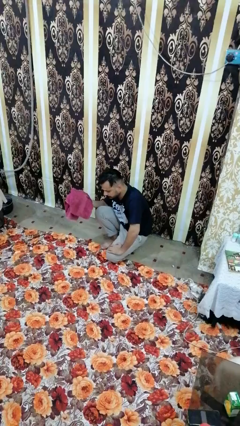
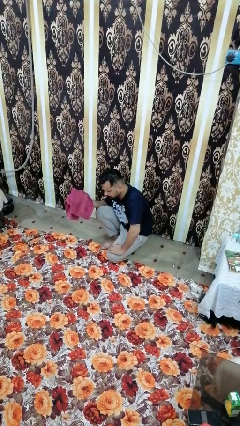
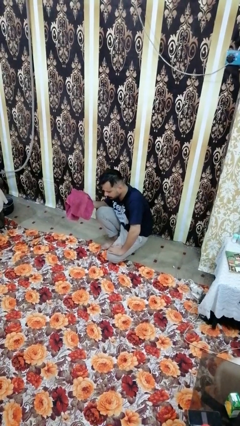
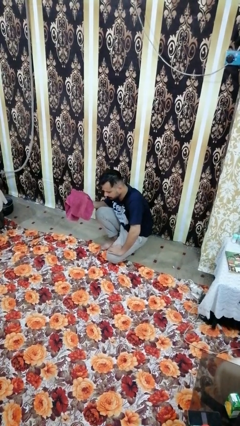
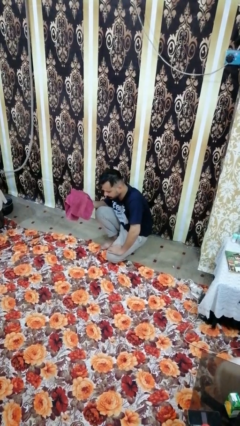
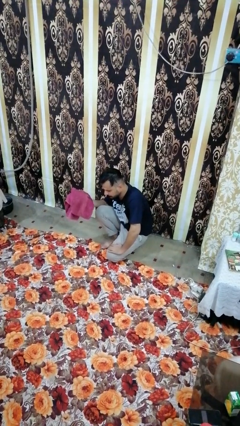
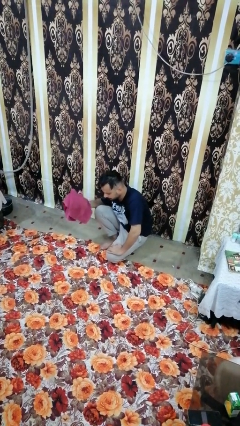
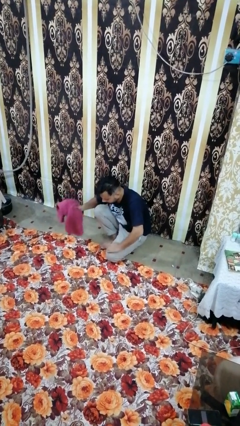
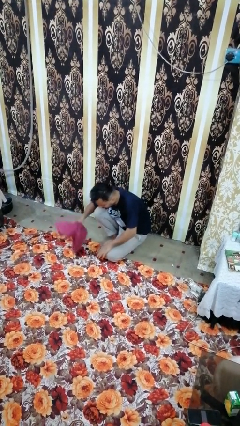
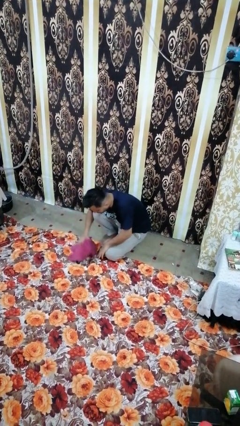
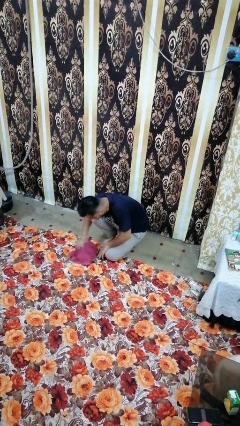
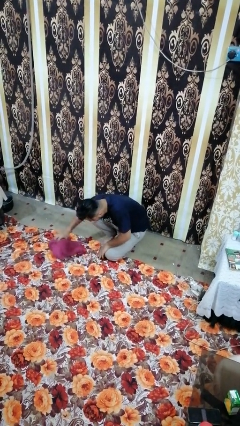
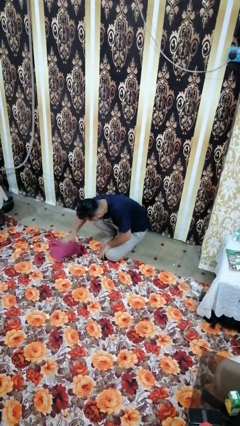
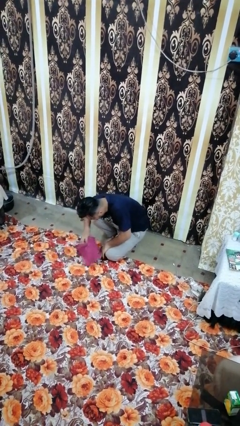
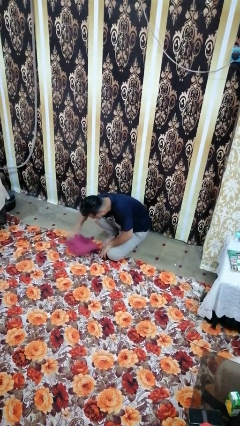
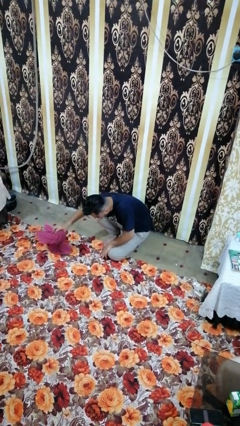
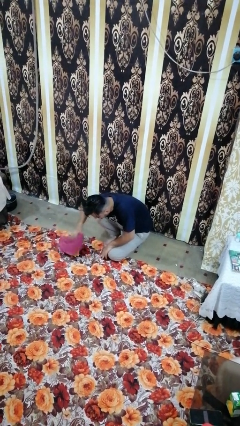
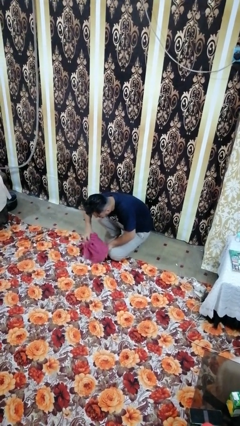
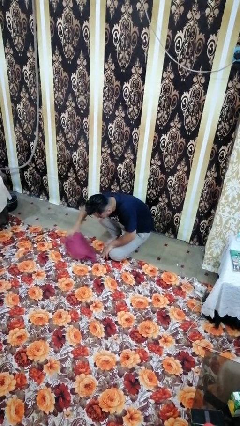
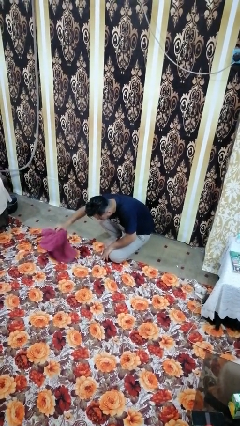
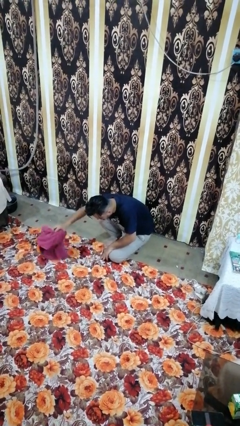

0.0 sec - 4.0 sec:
person mops

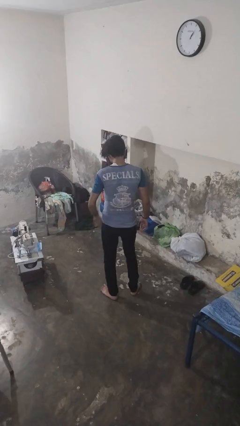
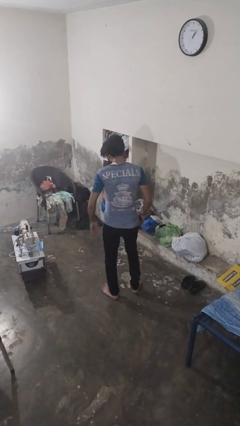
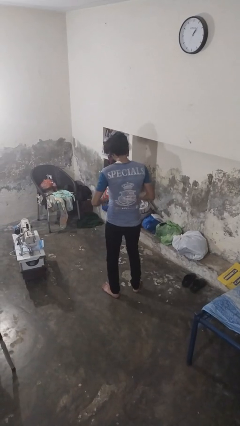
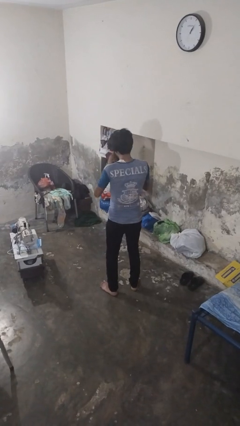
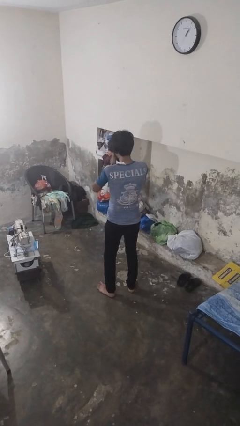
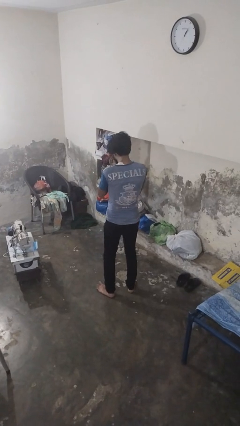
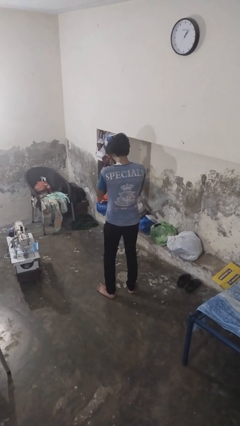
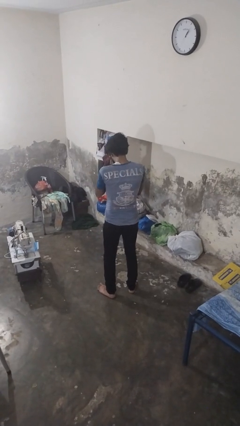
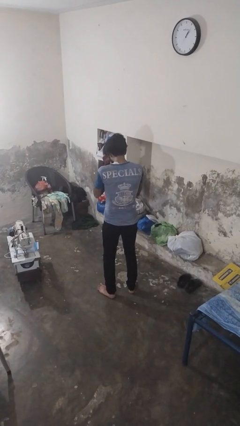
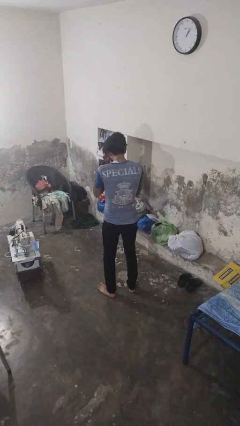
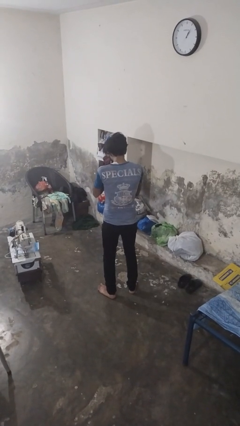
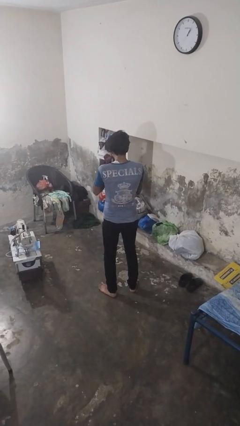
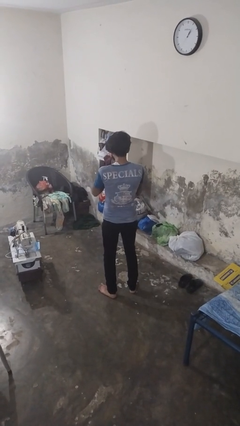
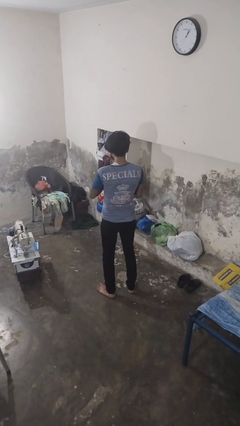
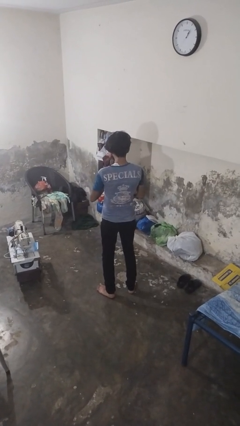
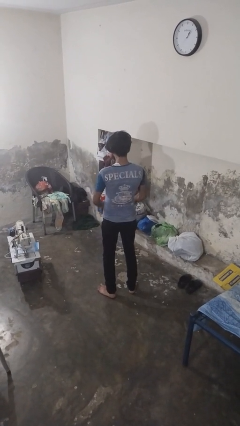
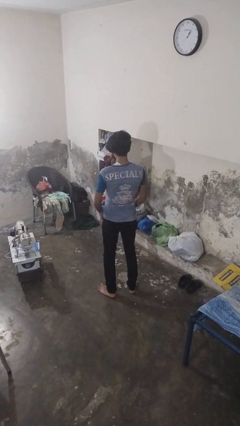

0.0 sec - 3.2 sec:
person sneezes into hand

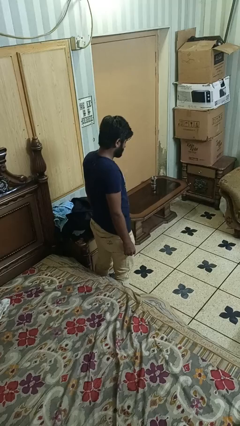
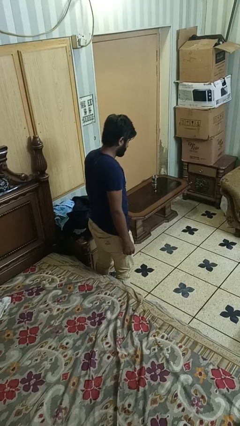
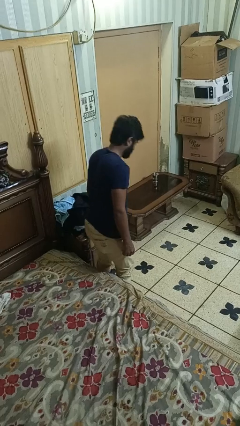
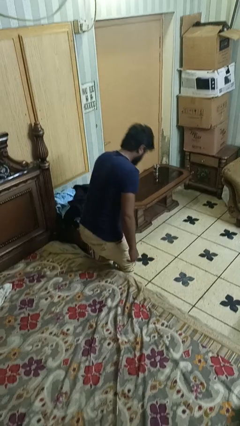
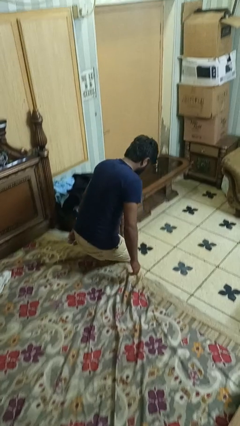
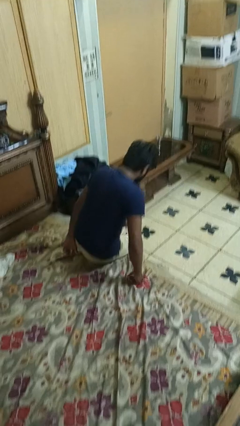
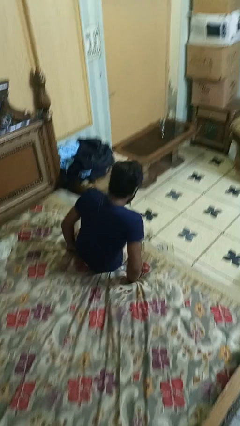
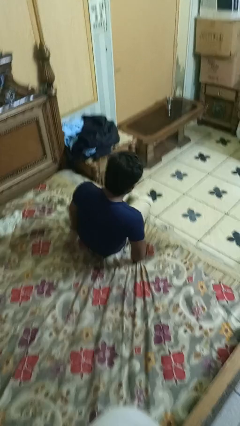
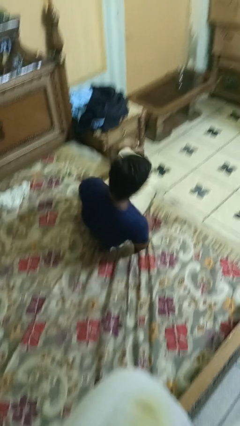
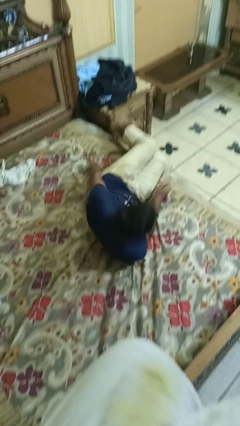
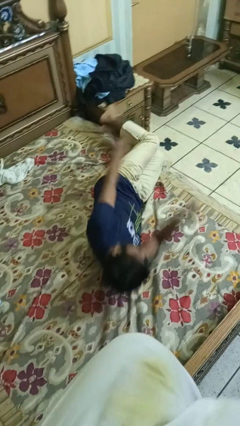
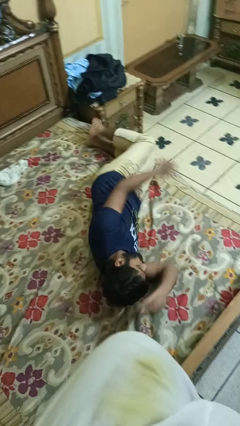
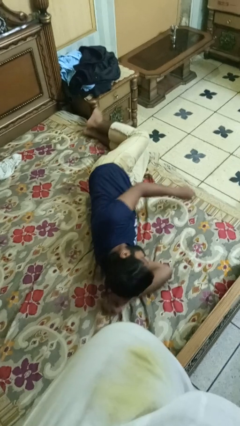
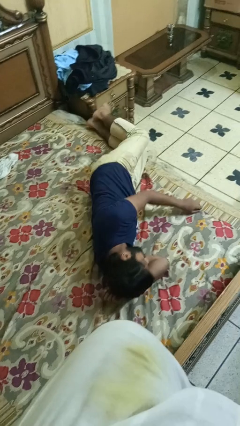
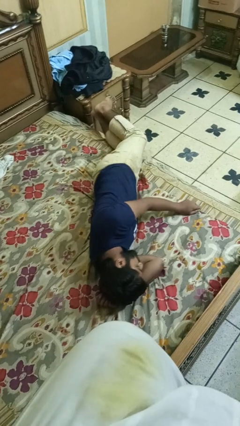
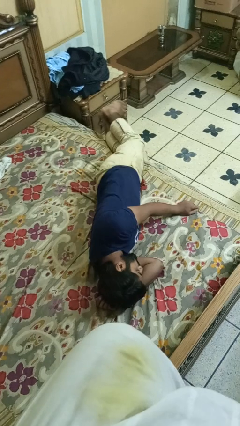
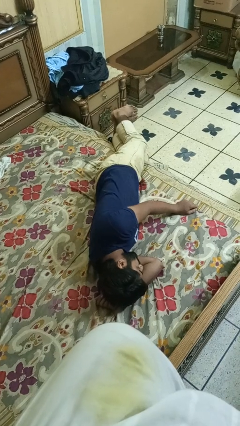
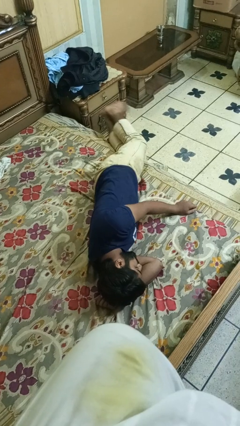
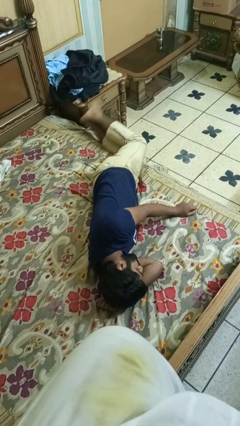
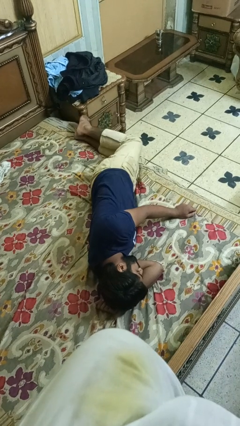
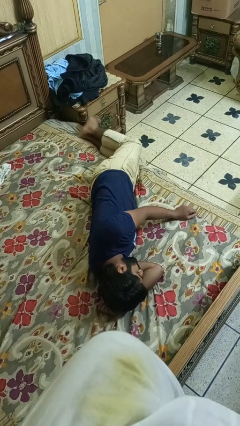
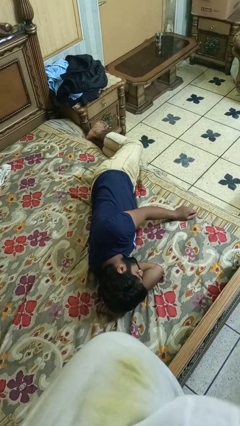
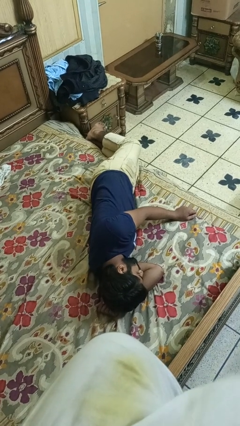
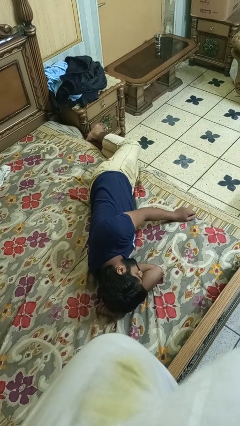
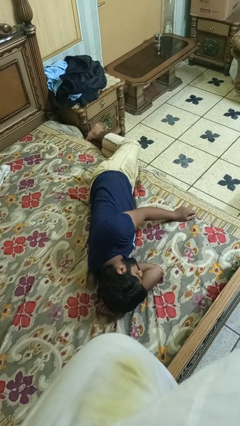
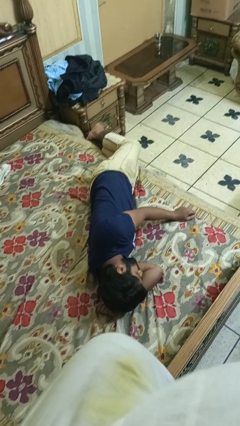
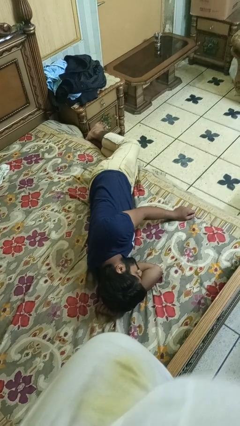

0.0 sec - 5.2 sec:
person lies down on bed

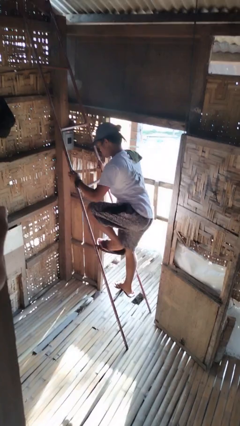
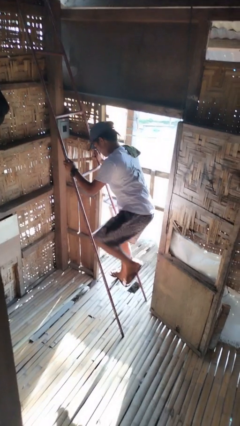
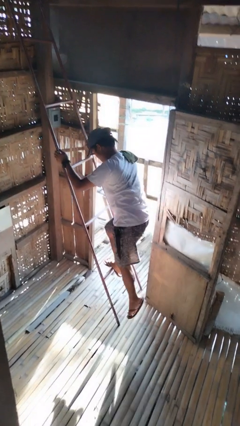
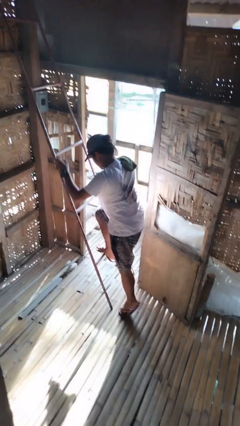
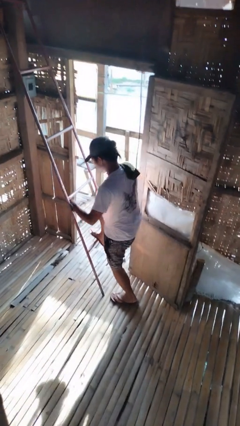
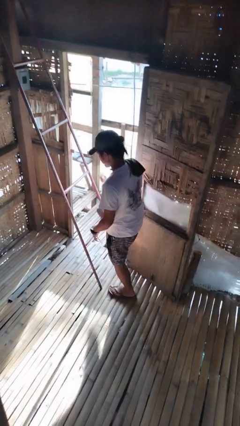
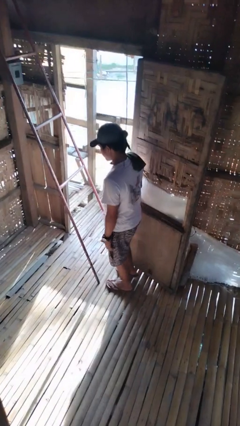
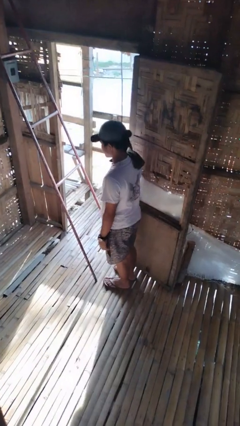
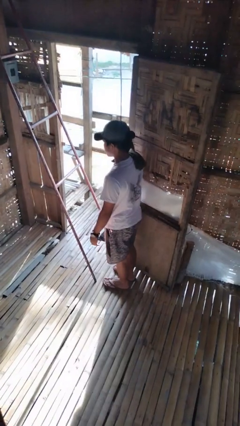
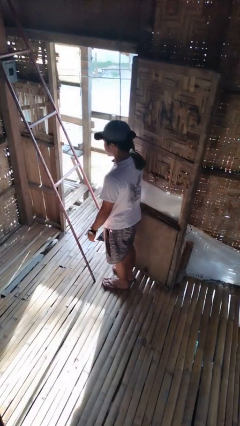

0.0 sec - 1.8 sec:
person climbs down ladder

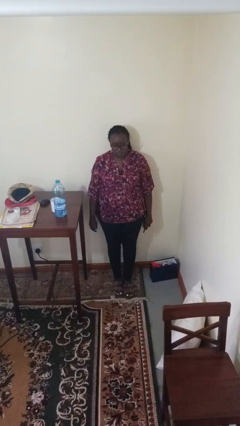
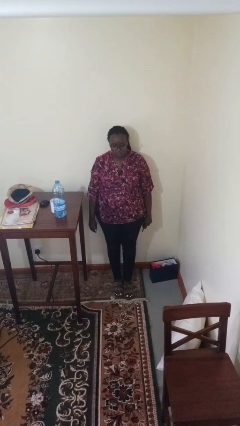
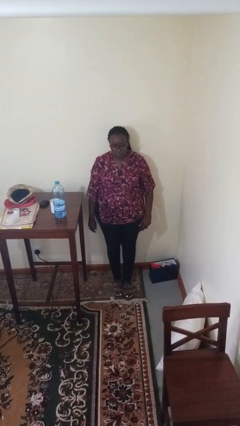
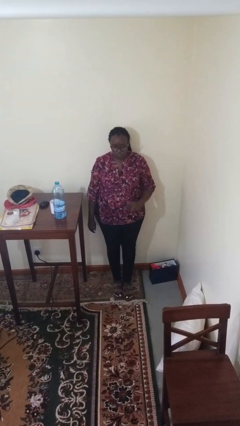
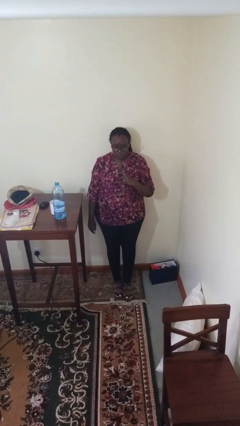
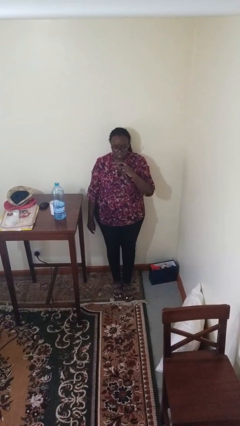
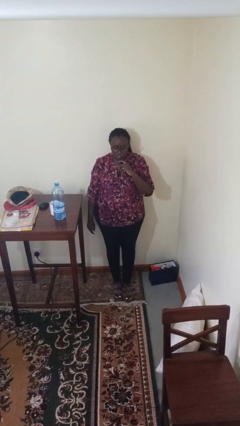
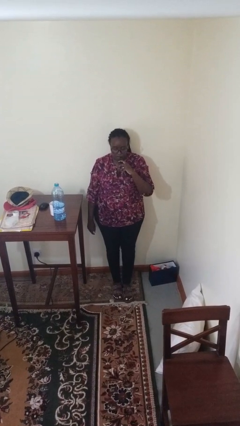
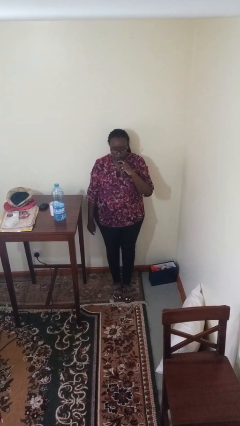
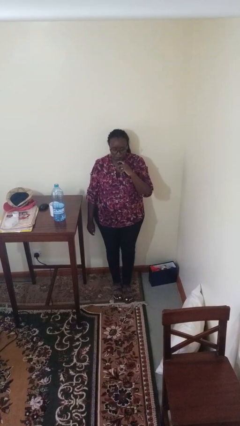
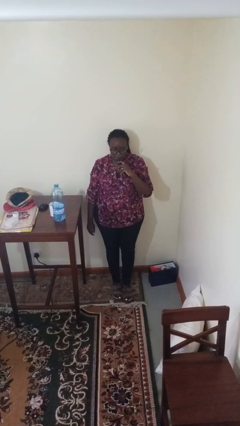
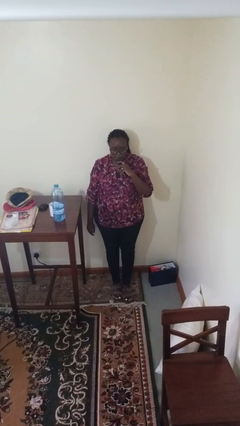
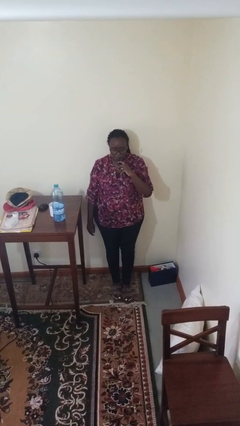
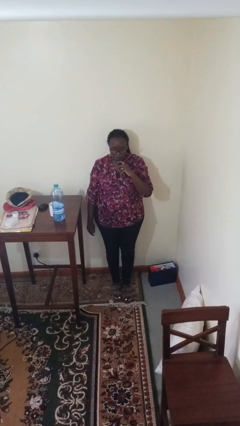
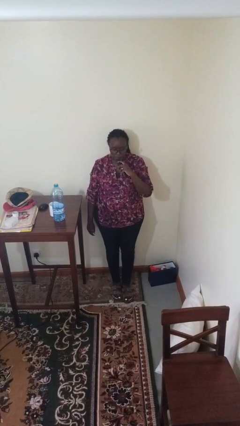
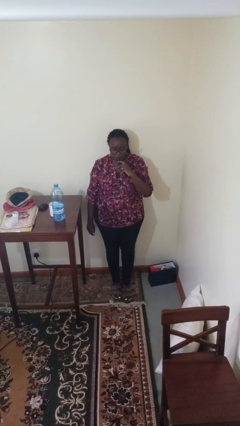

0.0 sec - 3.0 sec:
person vapes

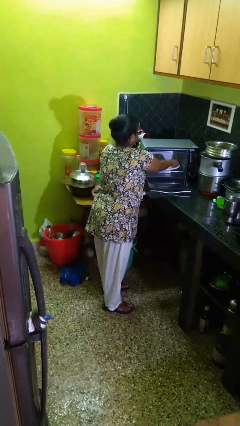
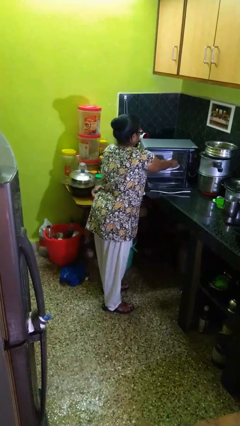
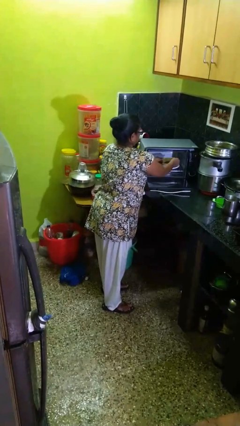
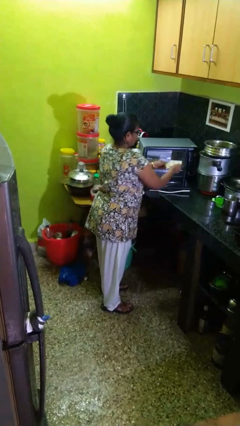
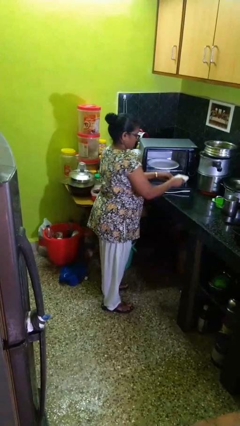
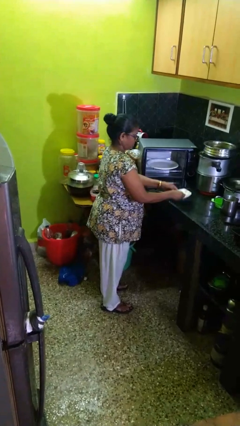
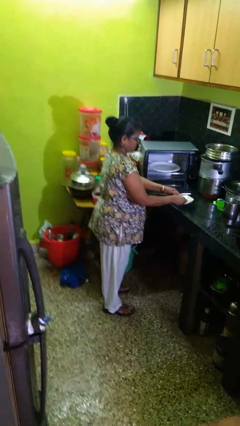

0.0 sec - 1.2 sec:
person takes object from microwave
